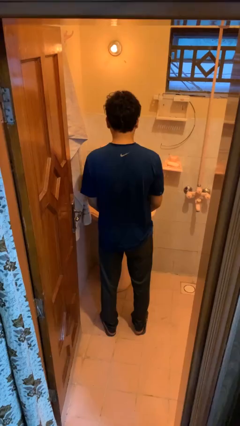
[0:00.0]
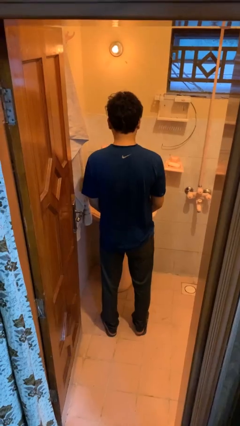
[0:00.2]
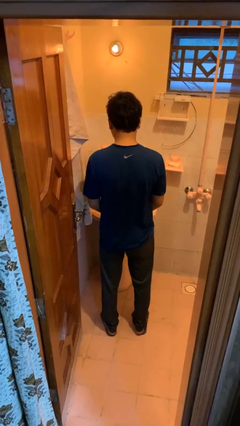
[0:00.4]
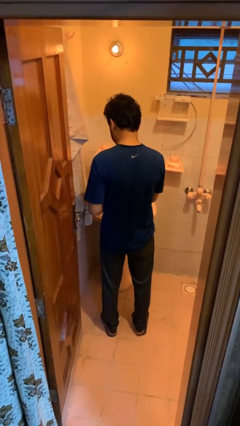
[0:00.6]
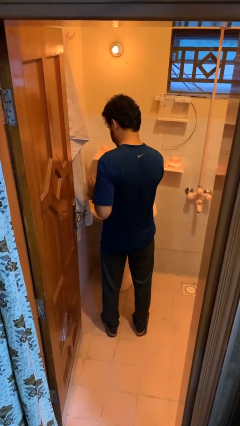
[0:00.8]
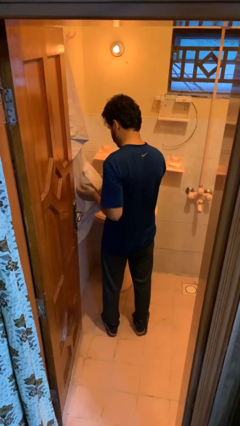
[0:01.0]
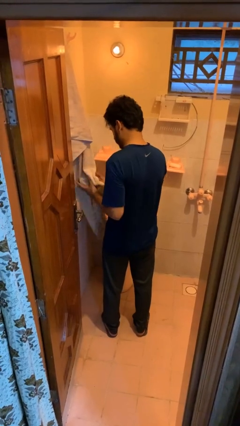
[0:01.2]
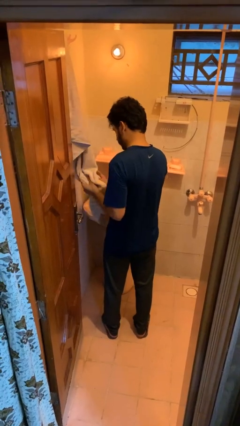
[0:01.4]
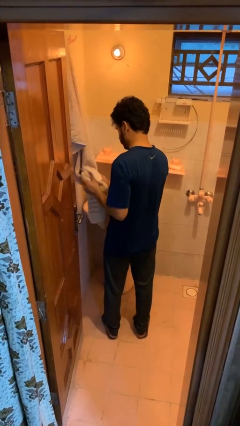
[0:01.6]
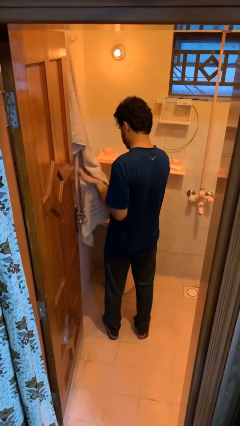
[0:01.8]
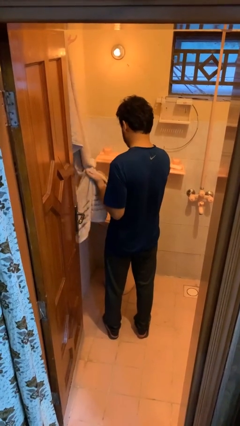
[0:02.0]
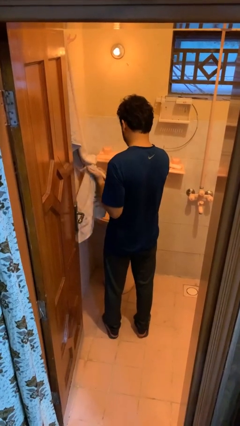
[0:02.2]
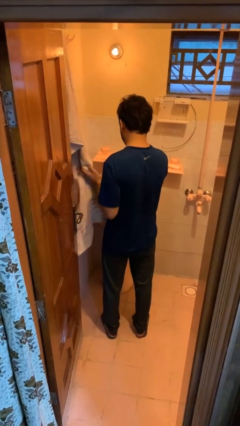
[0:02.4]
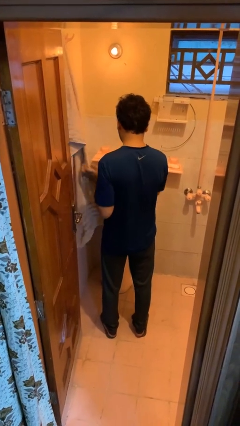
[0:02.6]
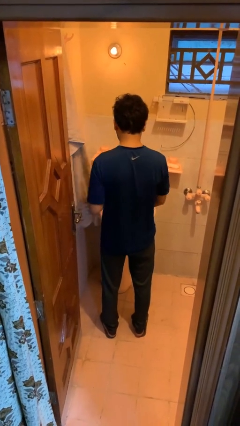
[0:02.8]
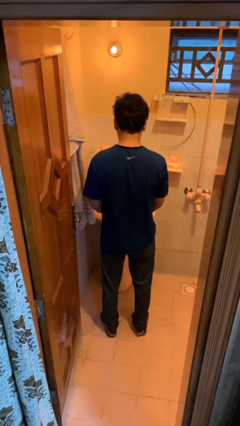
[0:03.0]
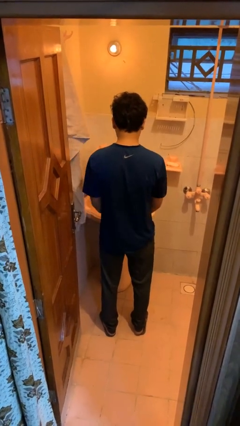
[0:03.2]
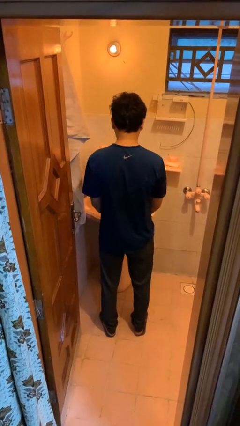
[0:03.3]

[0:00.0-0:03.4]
person dries hands with towel

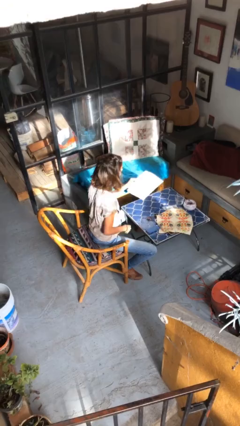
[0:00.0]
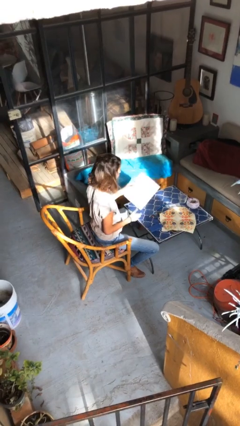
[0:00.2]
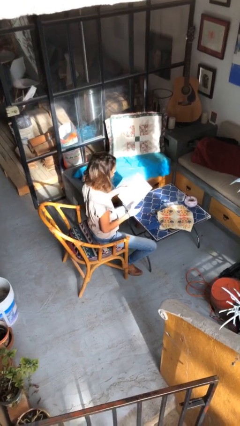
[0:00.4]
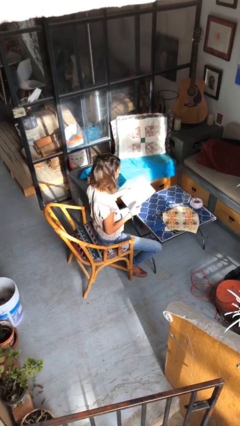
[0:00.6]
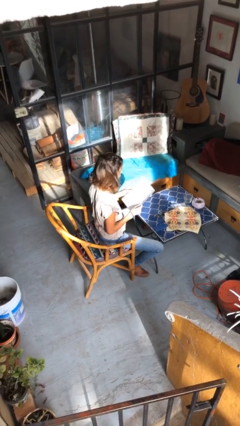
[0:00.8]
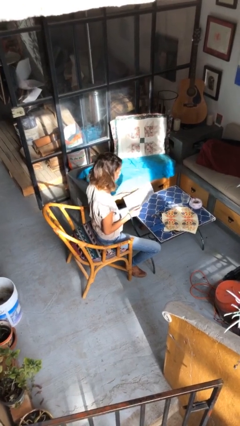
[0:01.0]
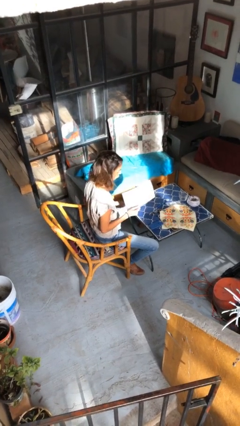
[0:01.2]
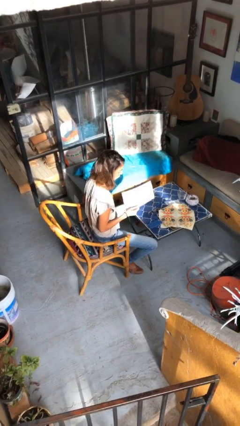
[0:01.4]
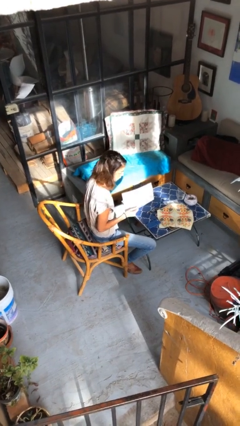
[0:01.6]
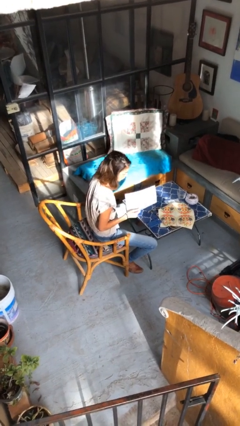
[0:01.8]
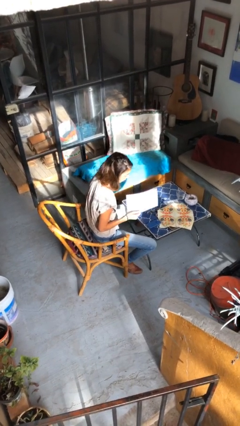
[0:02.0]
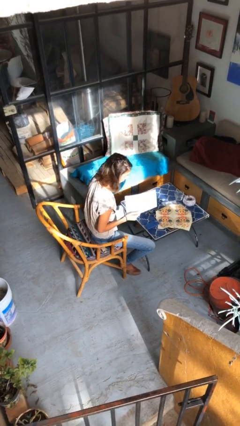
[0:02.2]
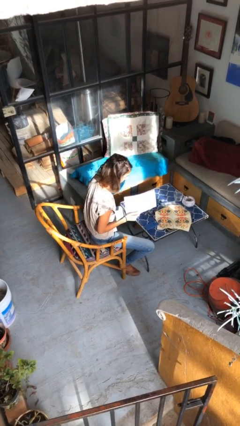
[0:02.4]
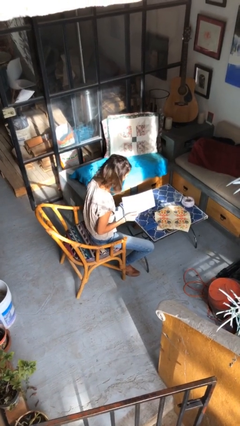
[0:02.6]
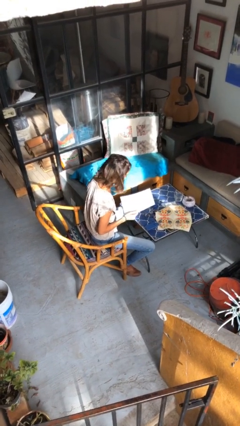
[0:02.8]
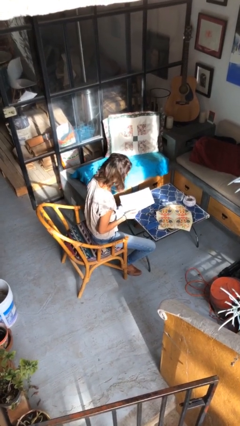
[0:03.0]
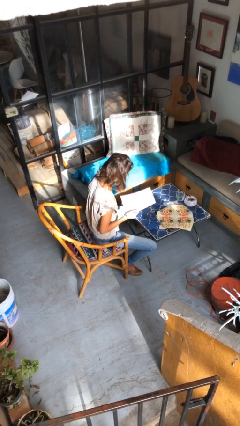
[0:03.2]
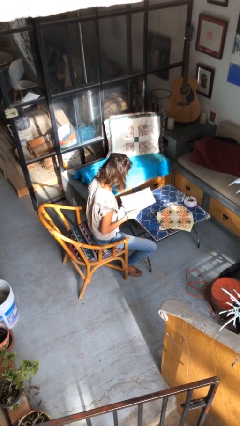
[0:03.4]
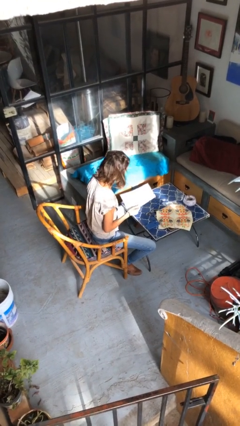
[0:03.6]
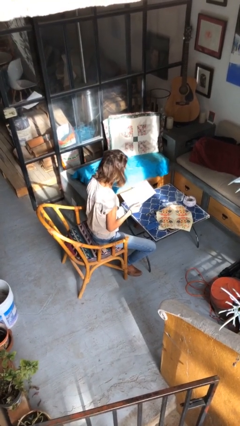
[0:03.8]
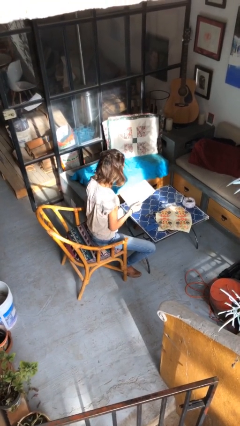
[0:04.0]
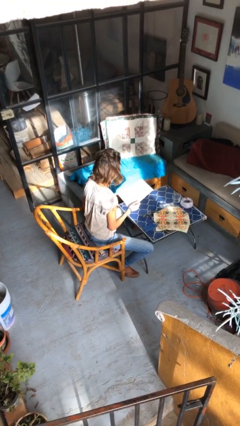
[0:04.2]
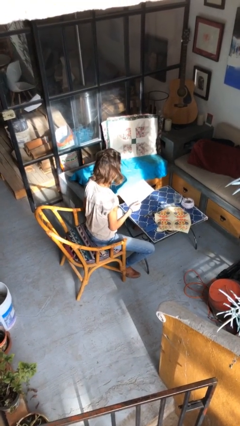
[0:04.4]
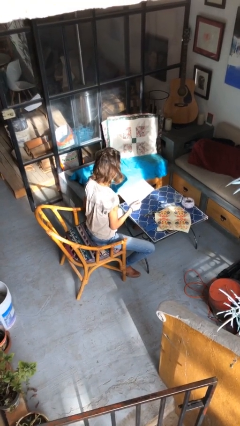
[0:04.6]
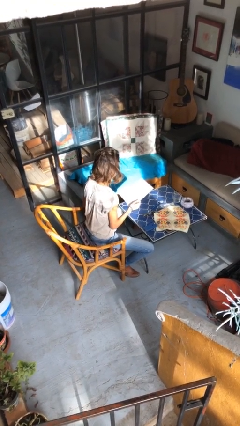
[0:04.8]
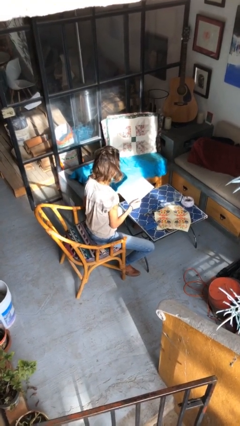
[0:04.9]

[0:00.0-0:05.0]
person reads document

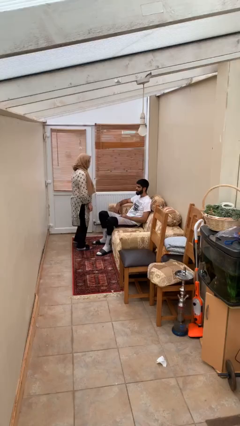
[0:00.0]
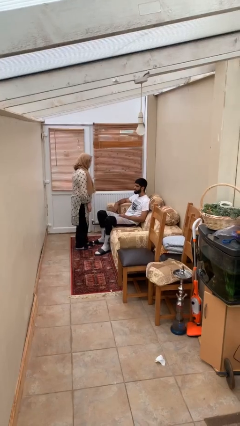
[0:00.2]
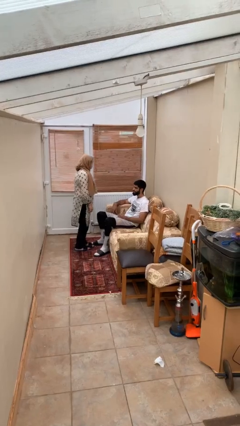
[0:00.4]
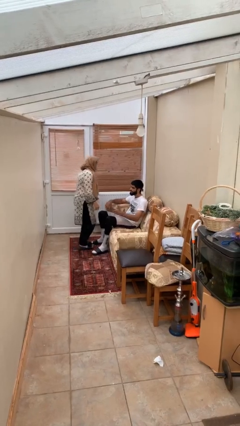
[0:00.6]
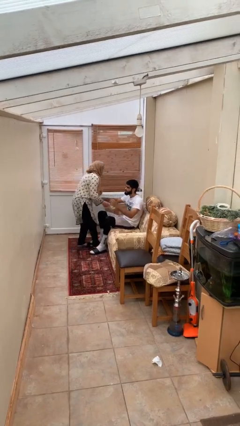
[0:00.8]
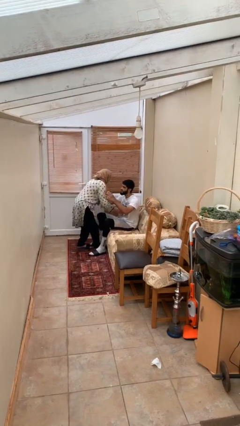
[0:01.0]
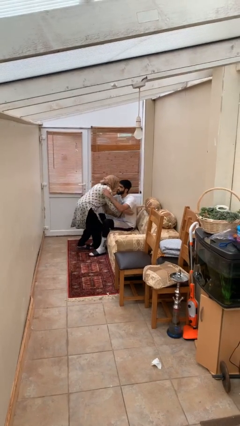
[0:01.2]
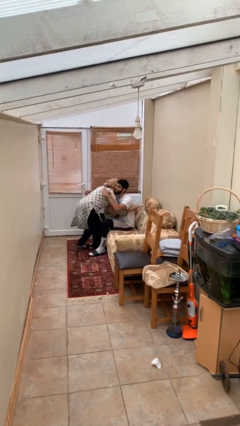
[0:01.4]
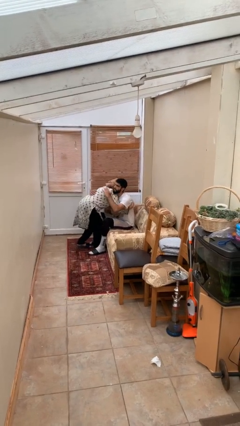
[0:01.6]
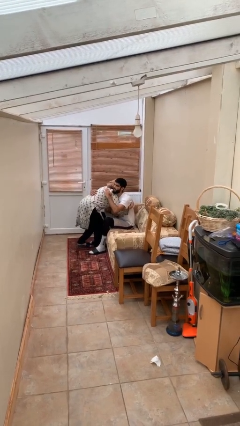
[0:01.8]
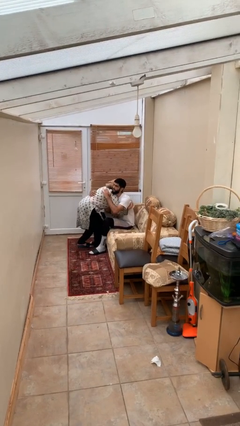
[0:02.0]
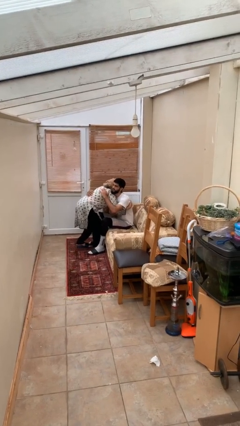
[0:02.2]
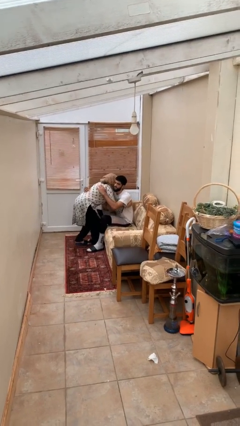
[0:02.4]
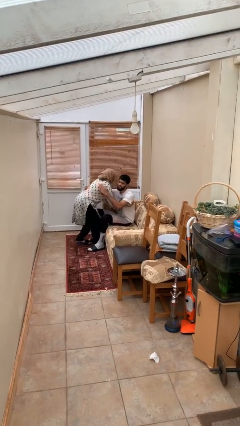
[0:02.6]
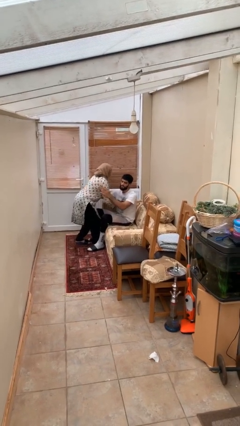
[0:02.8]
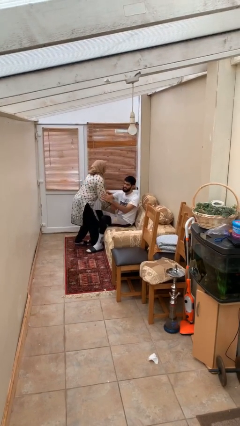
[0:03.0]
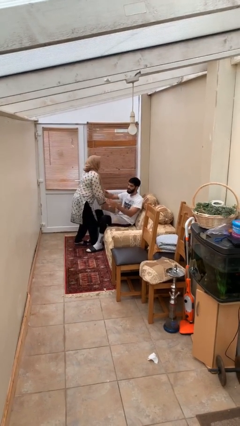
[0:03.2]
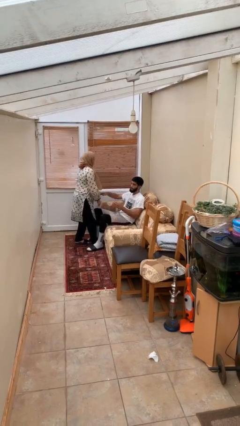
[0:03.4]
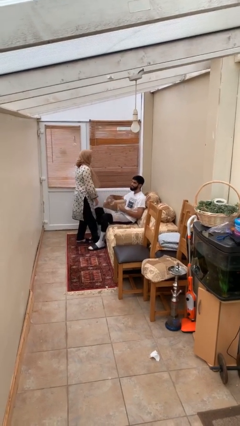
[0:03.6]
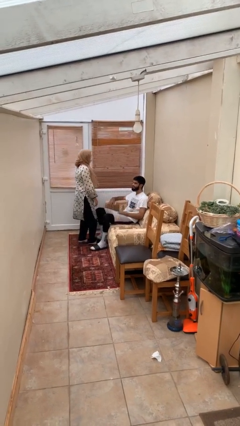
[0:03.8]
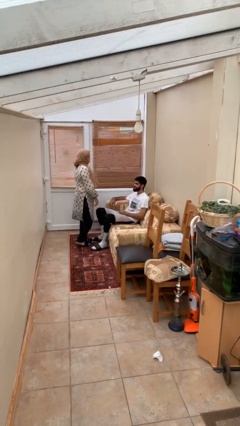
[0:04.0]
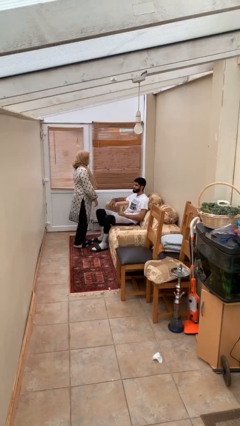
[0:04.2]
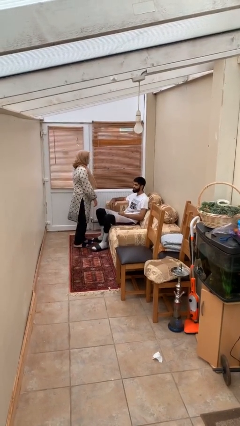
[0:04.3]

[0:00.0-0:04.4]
person embraces person

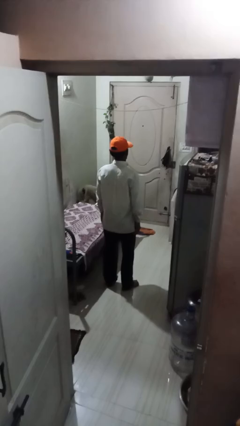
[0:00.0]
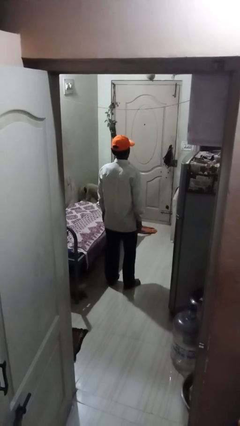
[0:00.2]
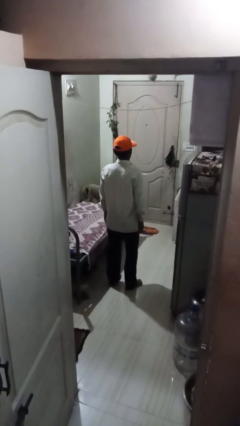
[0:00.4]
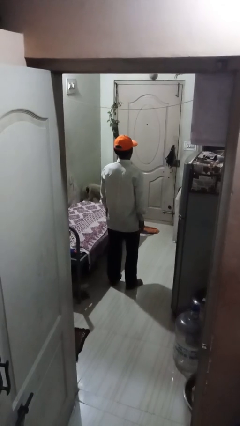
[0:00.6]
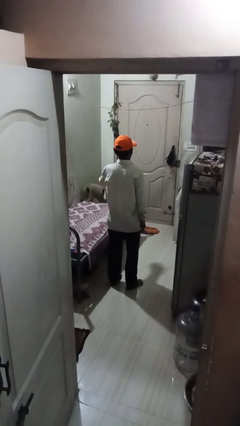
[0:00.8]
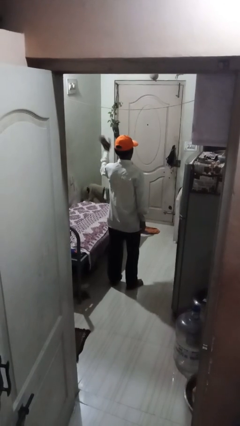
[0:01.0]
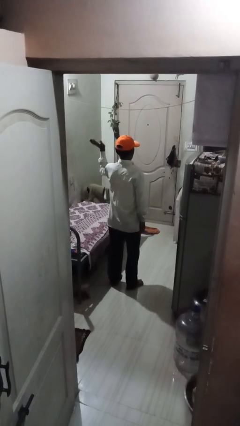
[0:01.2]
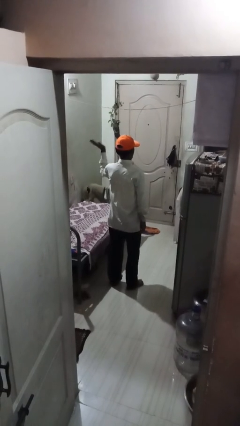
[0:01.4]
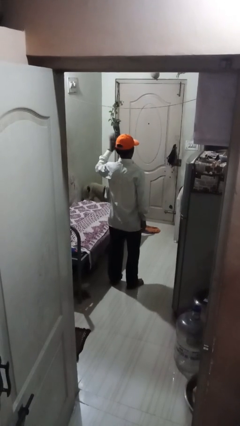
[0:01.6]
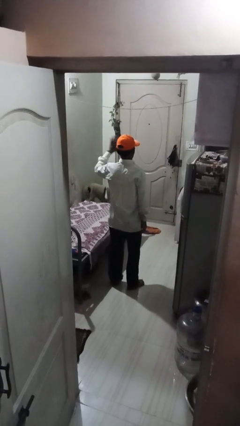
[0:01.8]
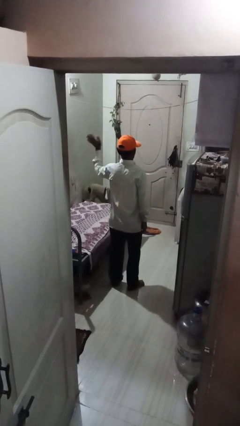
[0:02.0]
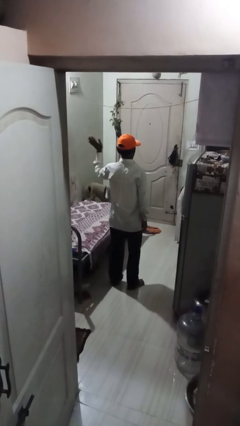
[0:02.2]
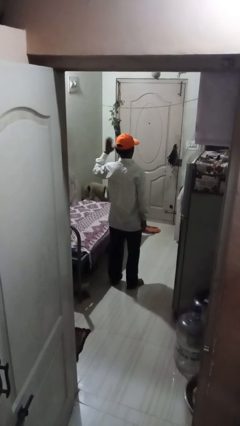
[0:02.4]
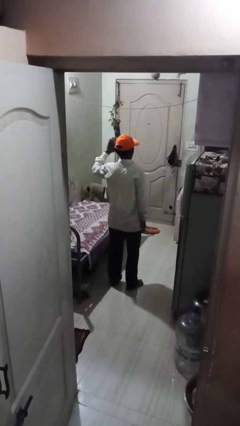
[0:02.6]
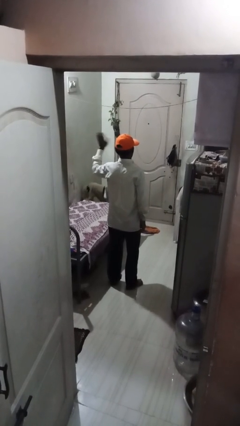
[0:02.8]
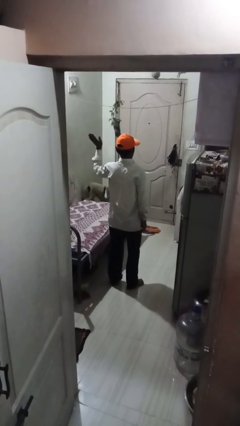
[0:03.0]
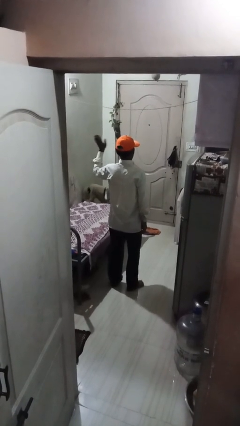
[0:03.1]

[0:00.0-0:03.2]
person waves at person

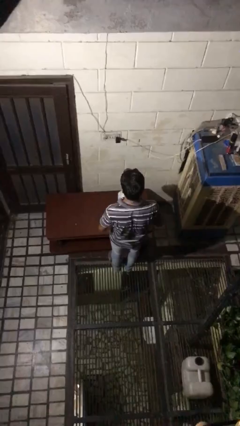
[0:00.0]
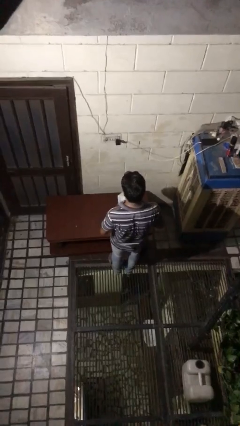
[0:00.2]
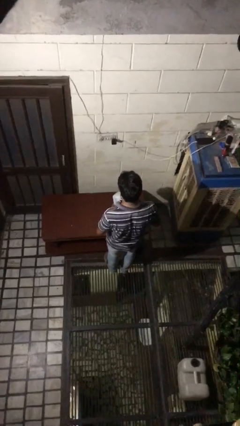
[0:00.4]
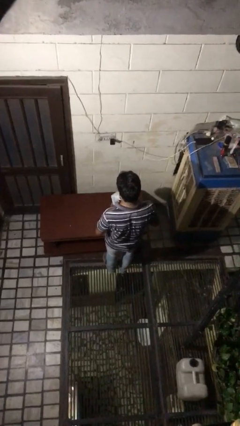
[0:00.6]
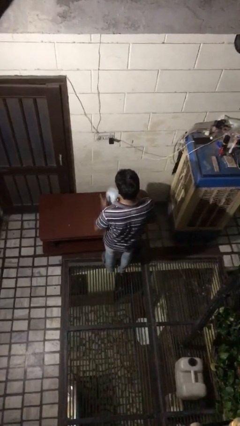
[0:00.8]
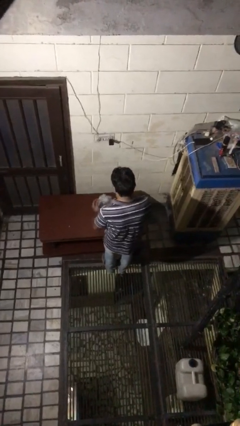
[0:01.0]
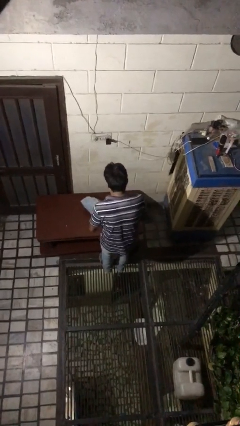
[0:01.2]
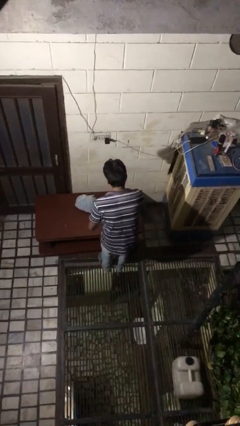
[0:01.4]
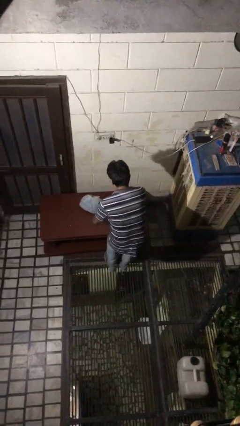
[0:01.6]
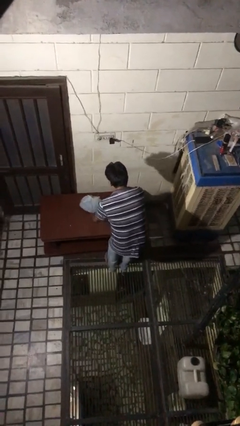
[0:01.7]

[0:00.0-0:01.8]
person throws object on table
